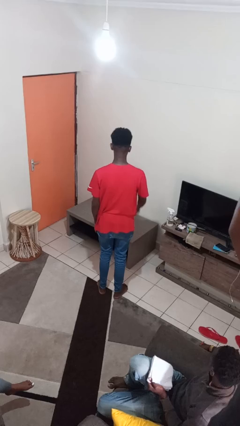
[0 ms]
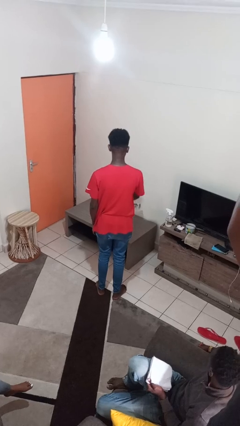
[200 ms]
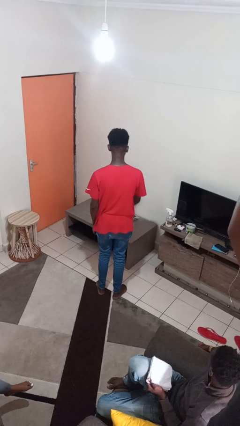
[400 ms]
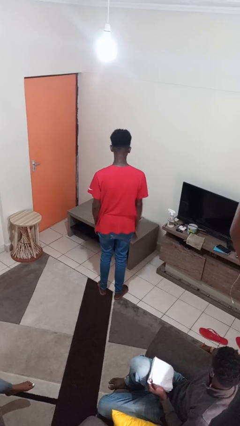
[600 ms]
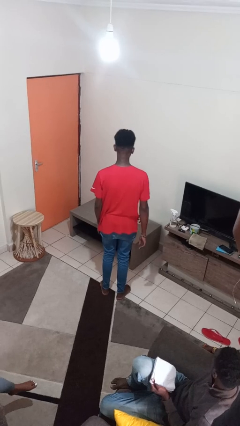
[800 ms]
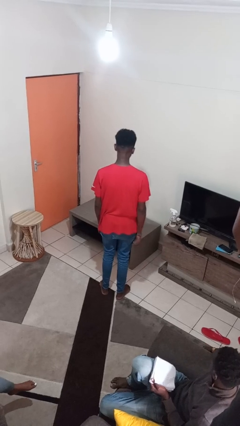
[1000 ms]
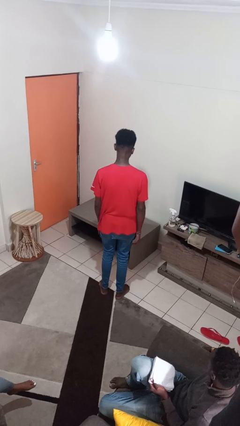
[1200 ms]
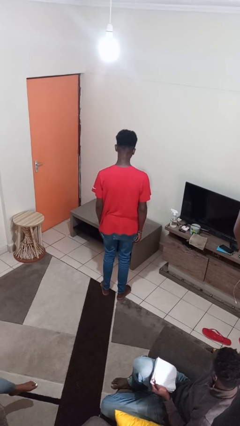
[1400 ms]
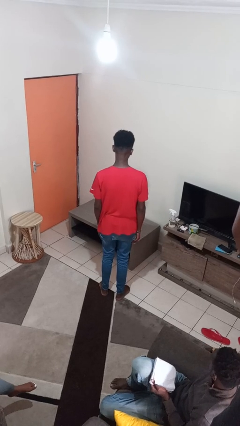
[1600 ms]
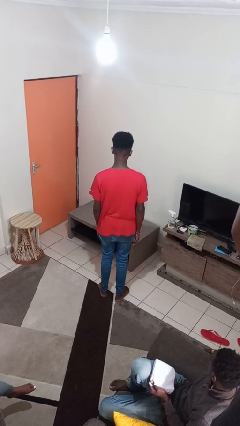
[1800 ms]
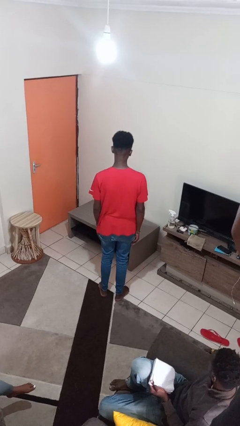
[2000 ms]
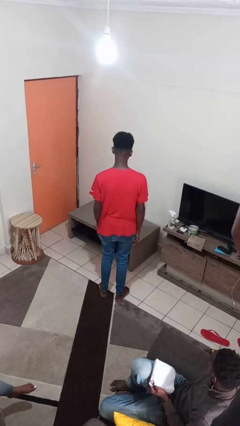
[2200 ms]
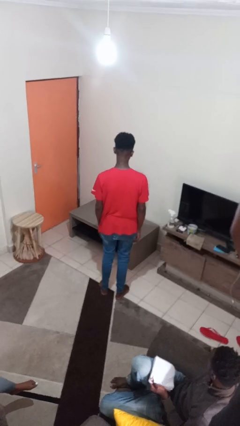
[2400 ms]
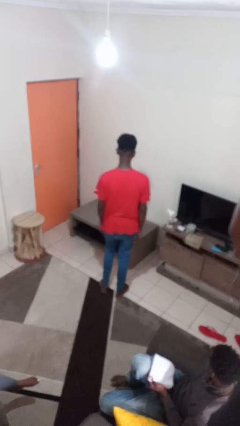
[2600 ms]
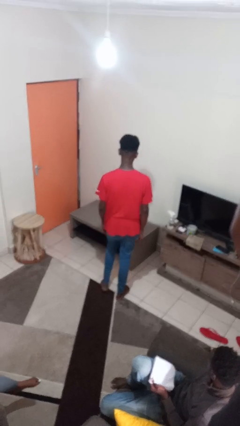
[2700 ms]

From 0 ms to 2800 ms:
person throws object on table

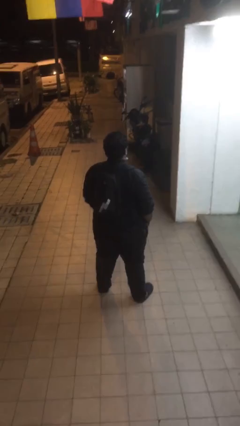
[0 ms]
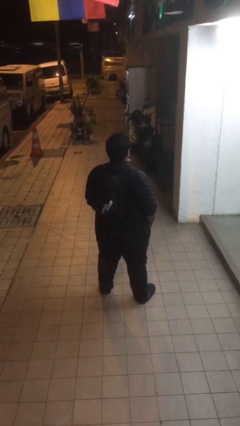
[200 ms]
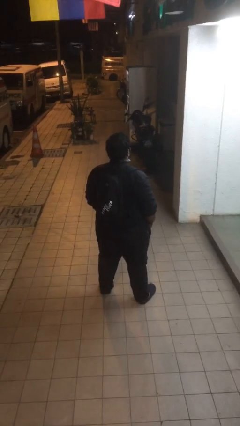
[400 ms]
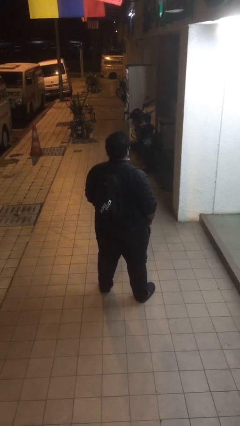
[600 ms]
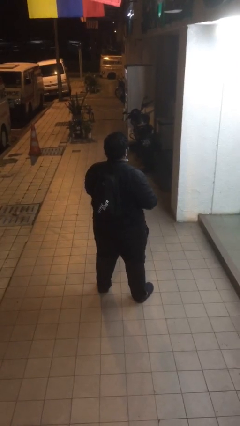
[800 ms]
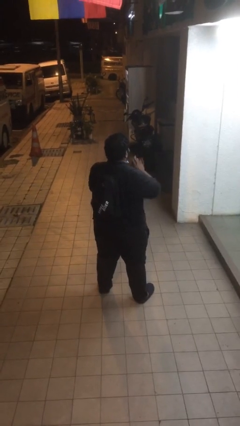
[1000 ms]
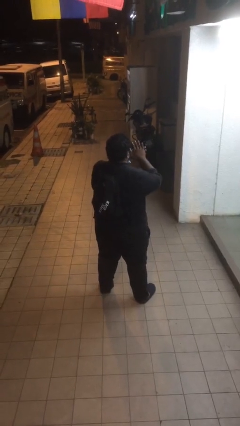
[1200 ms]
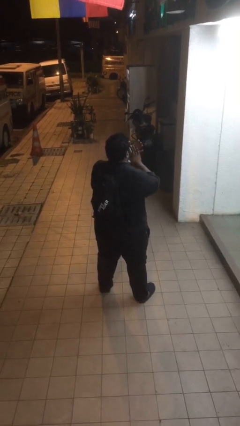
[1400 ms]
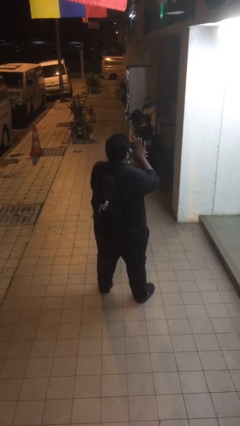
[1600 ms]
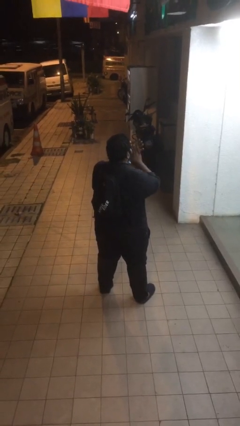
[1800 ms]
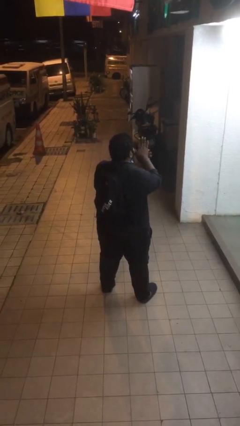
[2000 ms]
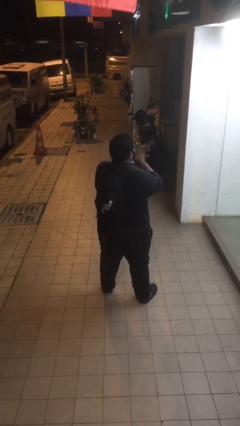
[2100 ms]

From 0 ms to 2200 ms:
person blows into hands

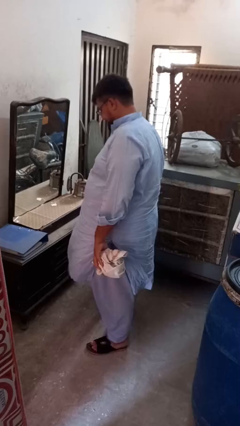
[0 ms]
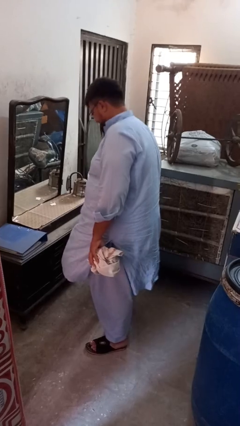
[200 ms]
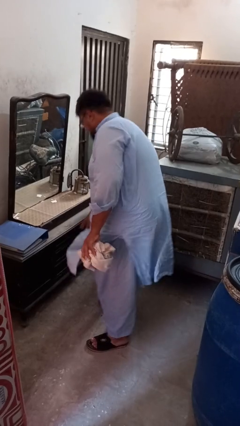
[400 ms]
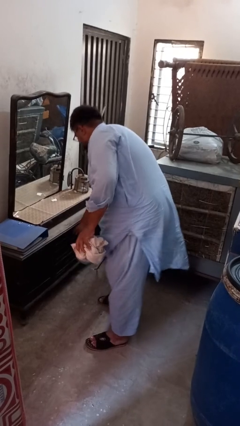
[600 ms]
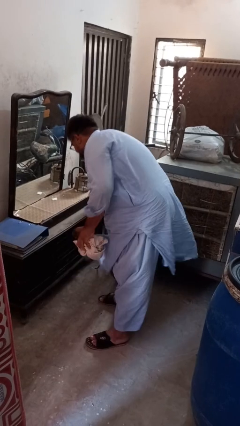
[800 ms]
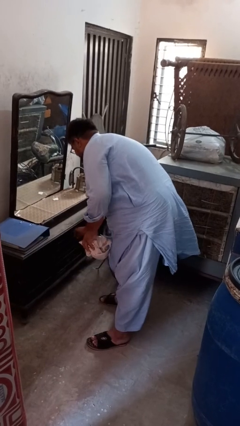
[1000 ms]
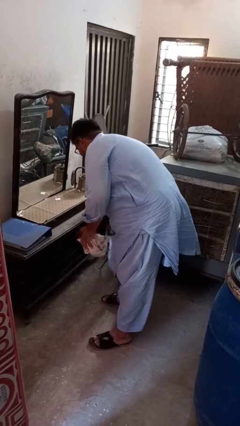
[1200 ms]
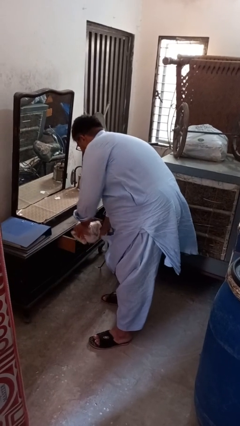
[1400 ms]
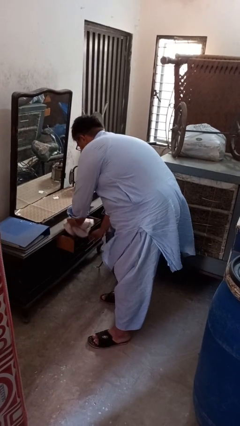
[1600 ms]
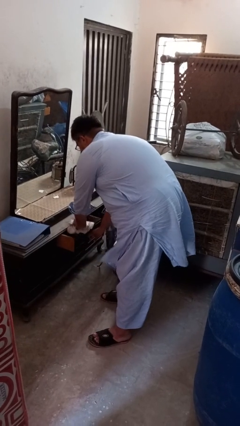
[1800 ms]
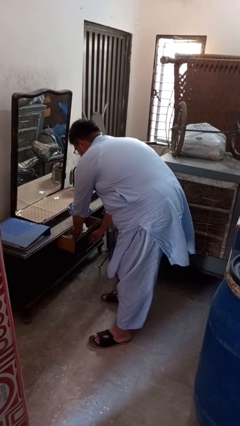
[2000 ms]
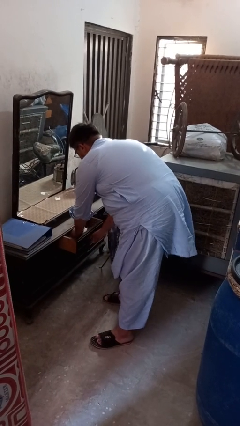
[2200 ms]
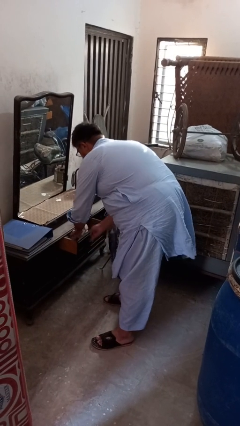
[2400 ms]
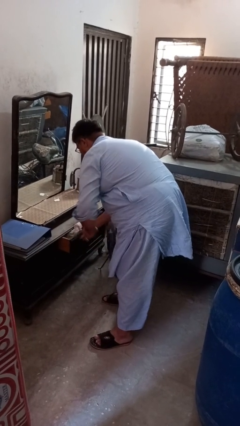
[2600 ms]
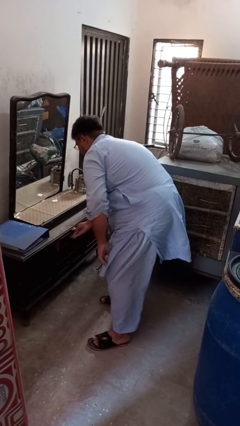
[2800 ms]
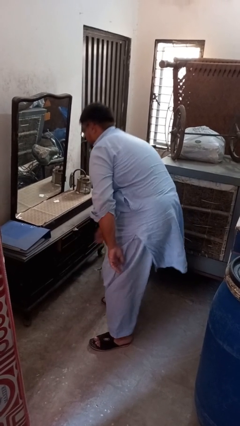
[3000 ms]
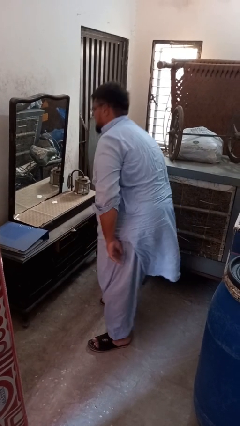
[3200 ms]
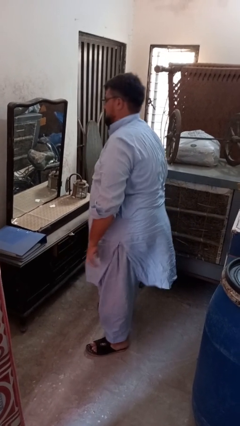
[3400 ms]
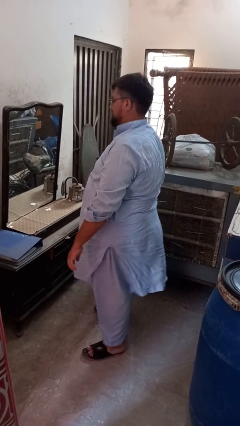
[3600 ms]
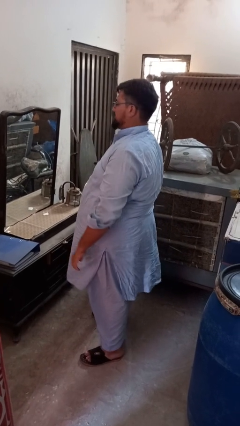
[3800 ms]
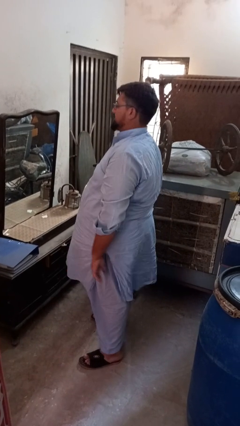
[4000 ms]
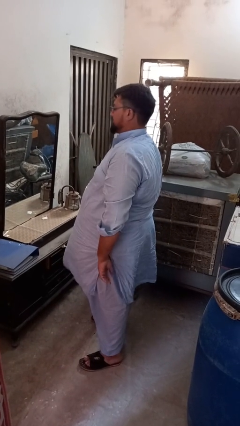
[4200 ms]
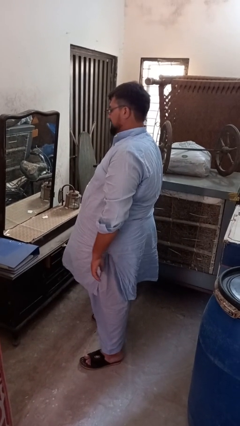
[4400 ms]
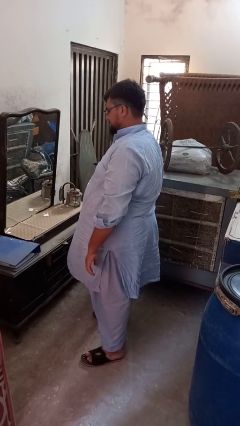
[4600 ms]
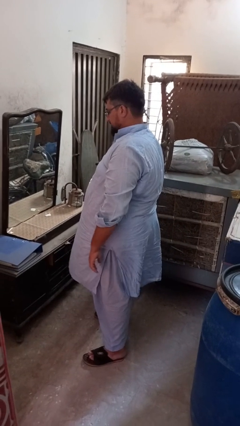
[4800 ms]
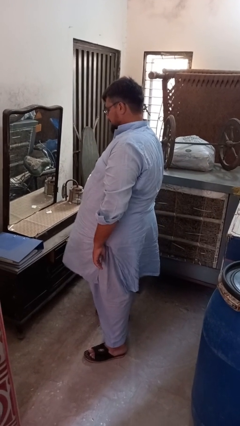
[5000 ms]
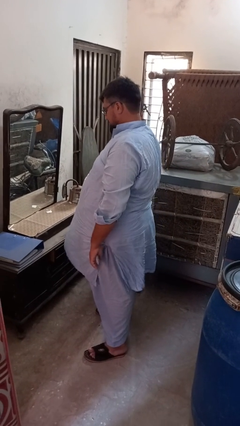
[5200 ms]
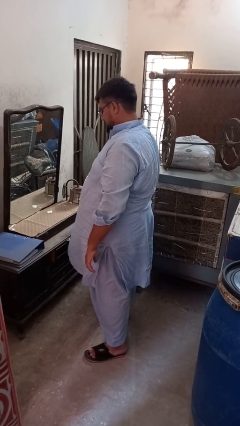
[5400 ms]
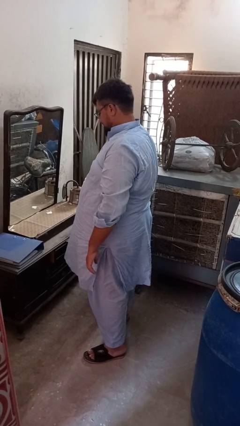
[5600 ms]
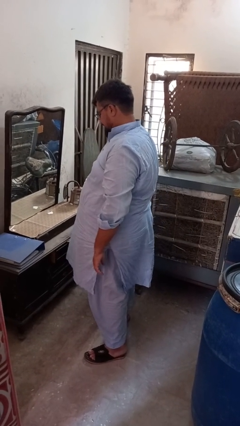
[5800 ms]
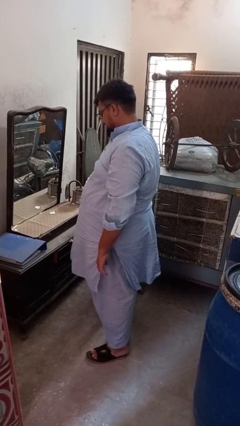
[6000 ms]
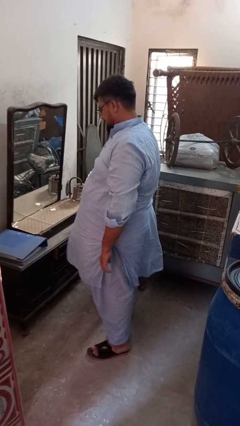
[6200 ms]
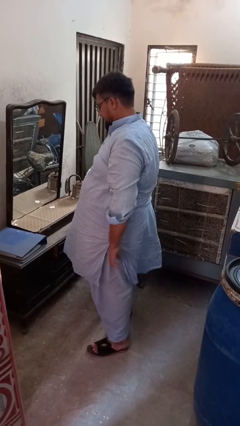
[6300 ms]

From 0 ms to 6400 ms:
person puts clothes into dresser

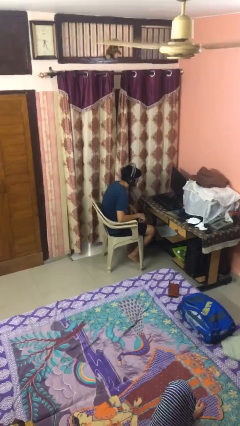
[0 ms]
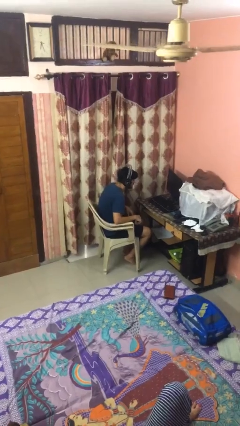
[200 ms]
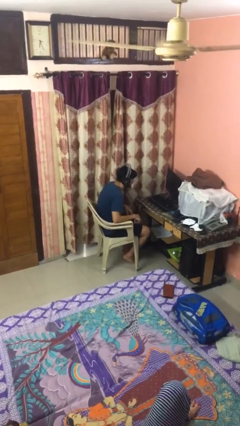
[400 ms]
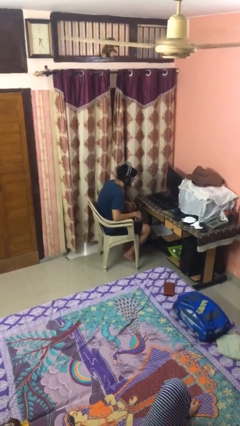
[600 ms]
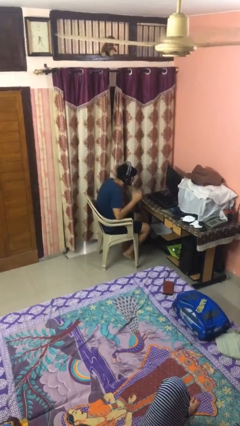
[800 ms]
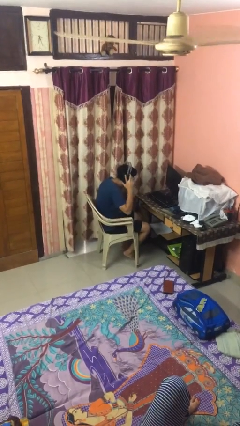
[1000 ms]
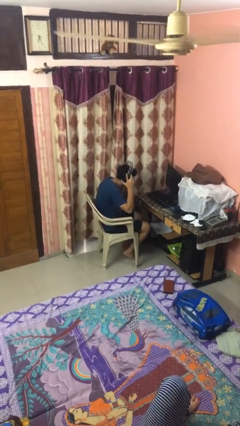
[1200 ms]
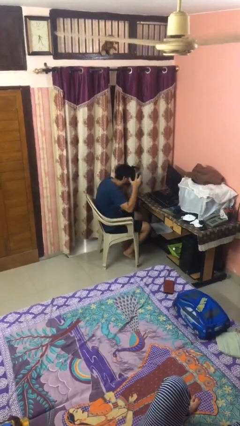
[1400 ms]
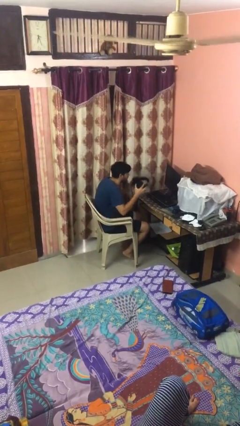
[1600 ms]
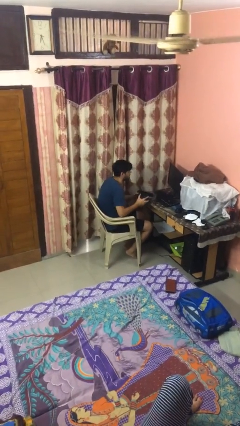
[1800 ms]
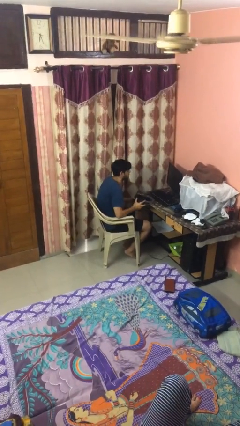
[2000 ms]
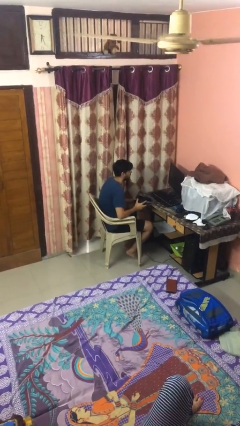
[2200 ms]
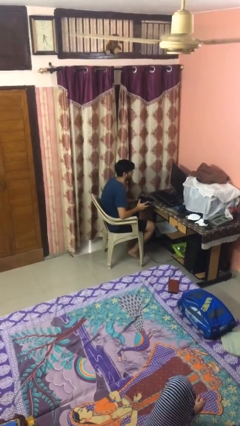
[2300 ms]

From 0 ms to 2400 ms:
person takes off headphones

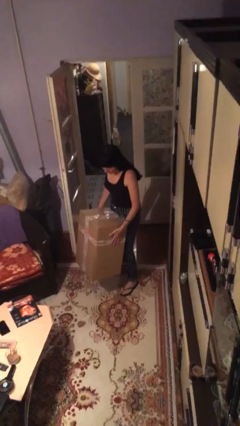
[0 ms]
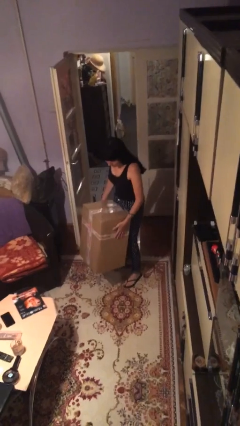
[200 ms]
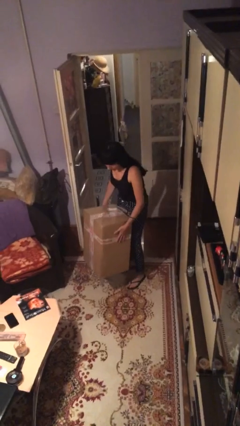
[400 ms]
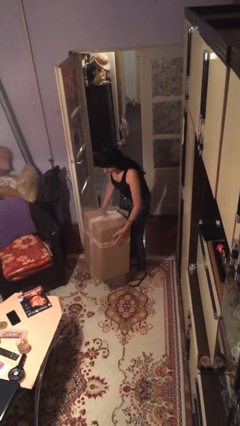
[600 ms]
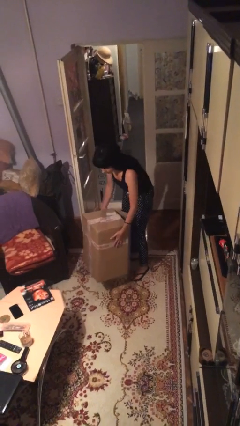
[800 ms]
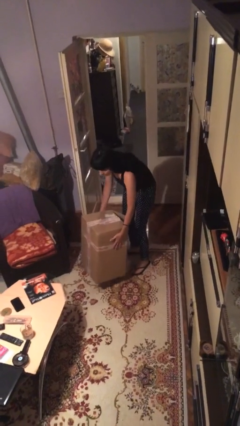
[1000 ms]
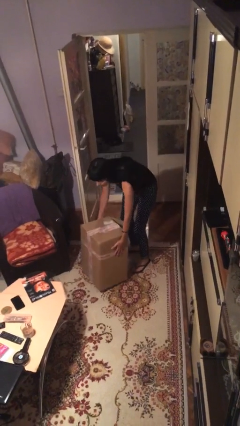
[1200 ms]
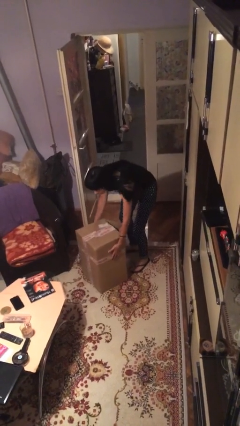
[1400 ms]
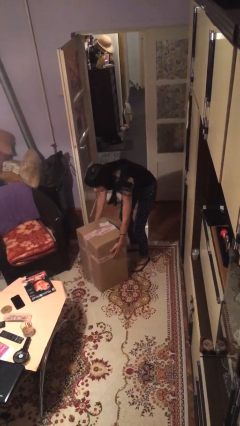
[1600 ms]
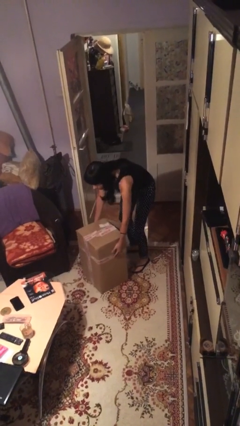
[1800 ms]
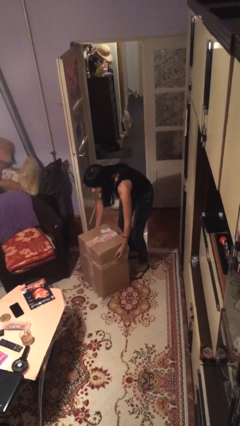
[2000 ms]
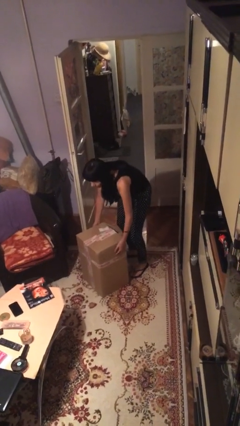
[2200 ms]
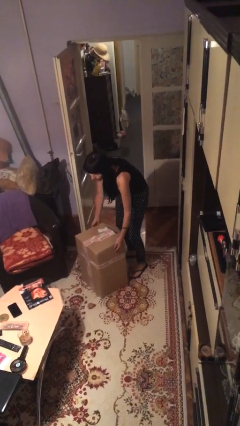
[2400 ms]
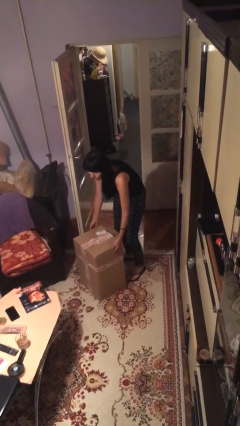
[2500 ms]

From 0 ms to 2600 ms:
person puts down object on floor

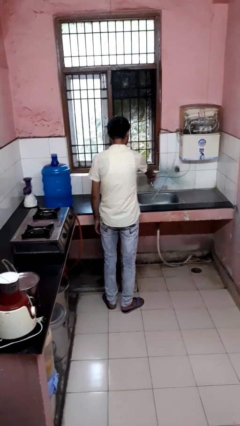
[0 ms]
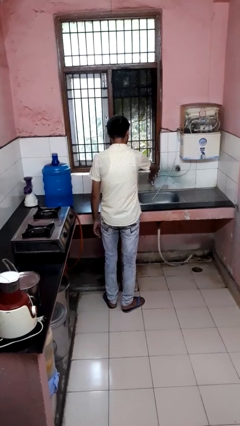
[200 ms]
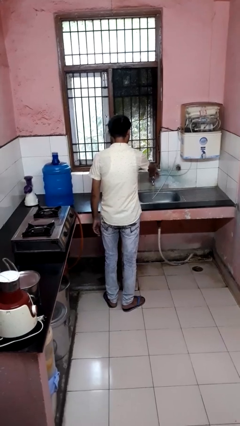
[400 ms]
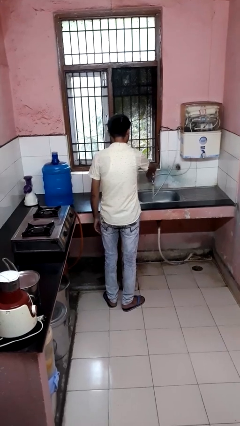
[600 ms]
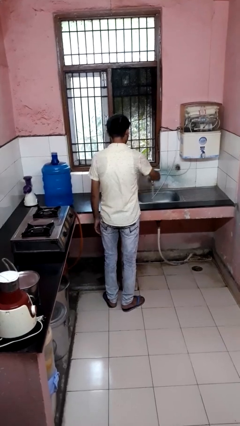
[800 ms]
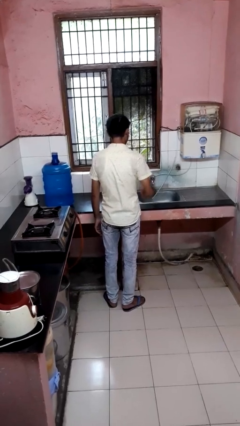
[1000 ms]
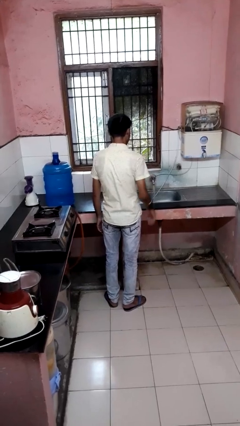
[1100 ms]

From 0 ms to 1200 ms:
person turns on faucet
